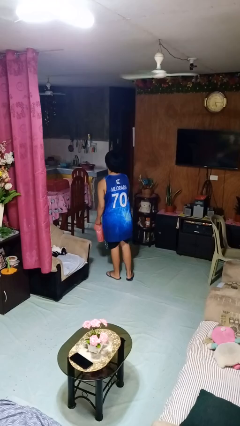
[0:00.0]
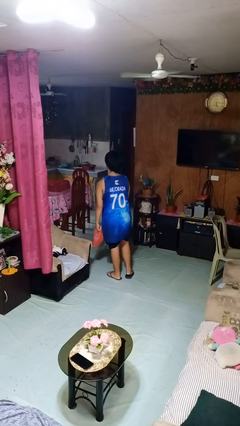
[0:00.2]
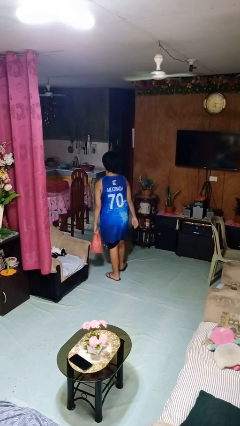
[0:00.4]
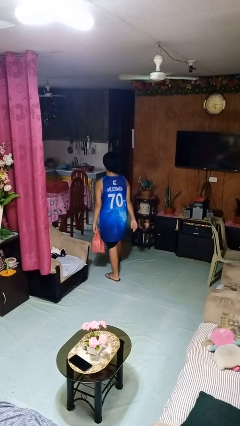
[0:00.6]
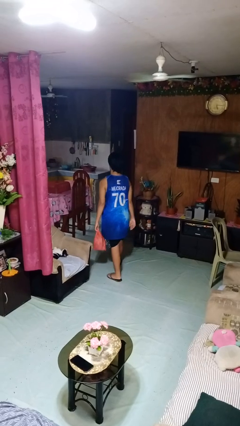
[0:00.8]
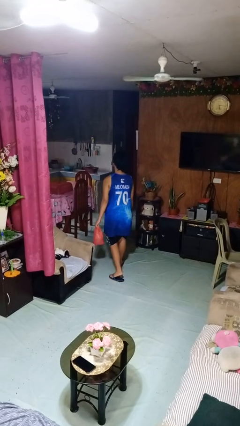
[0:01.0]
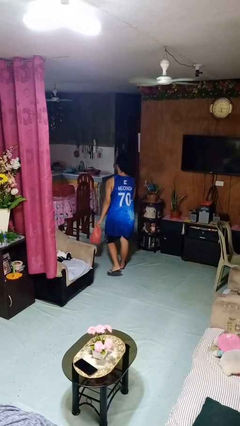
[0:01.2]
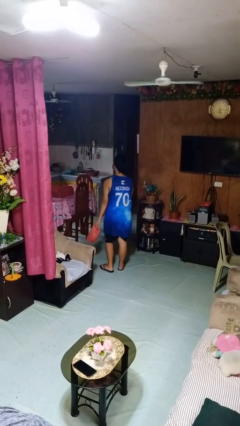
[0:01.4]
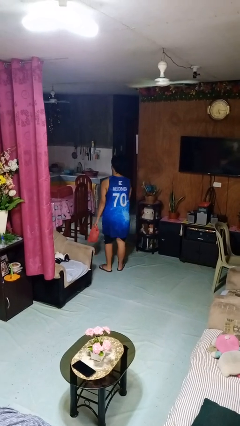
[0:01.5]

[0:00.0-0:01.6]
person carries groceries

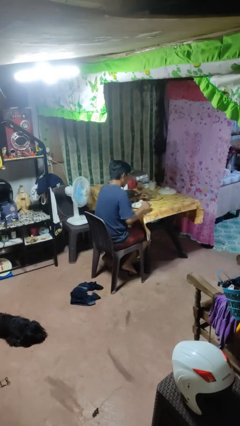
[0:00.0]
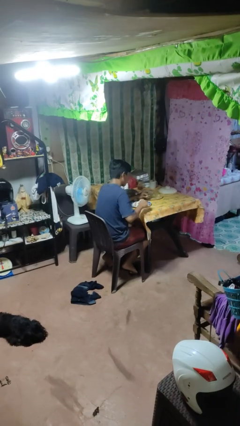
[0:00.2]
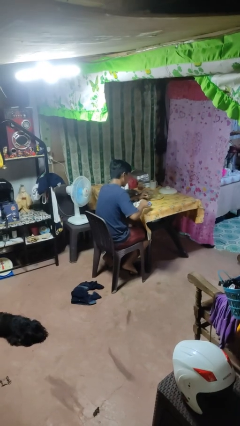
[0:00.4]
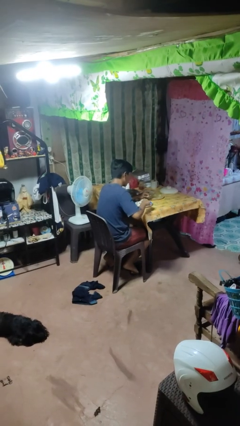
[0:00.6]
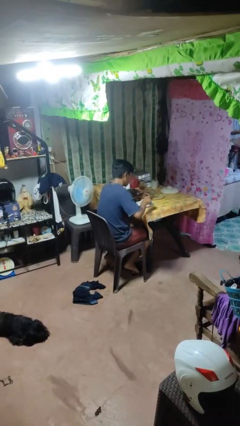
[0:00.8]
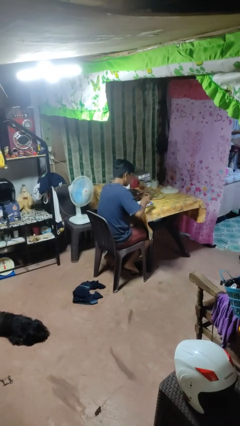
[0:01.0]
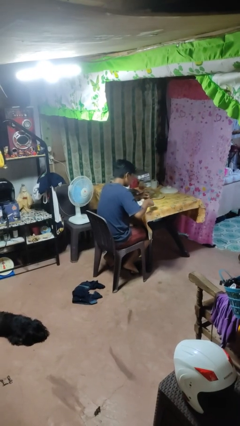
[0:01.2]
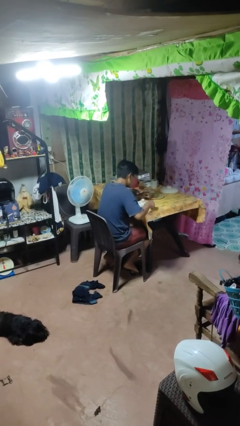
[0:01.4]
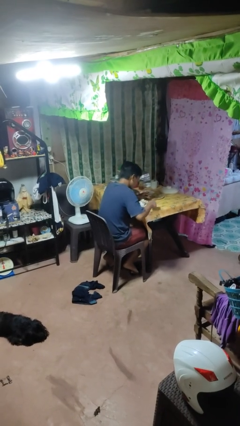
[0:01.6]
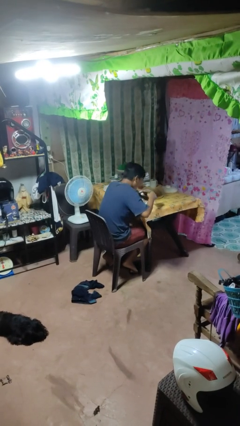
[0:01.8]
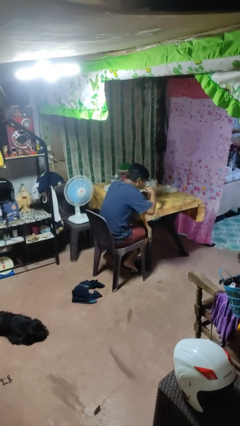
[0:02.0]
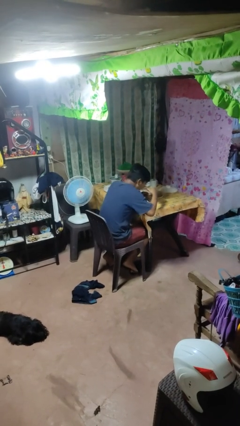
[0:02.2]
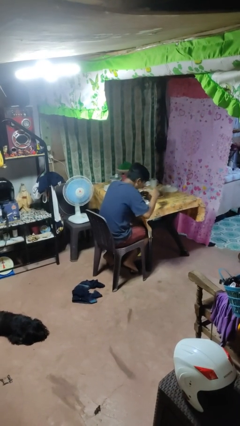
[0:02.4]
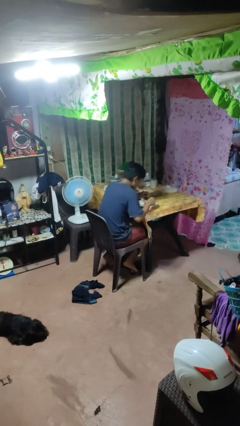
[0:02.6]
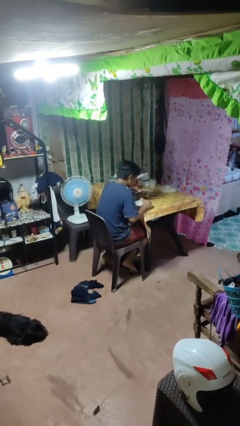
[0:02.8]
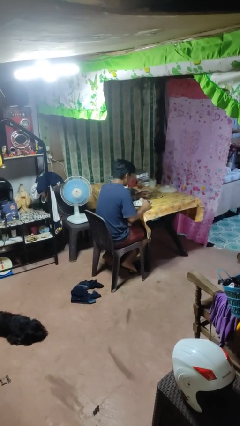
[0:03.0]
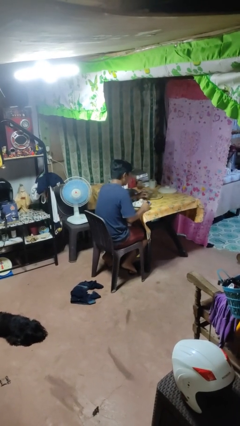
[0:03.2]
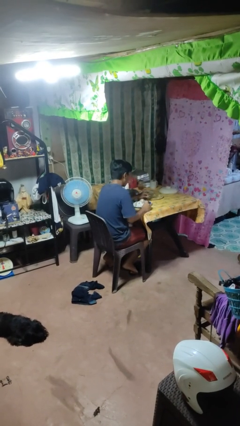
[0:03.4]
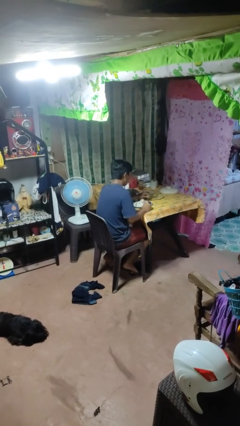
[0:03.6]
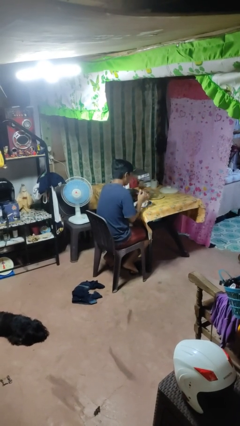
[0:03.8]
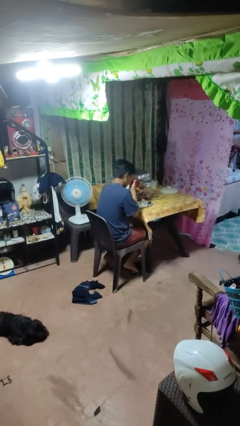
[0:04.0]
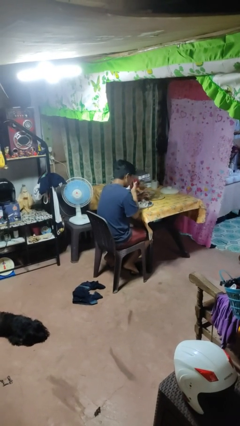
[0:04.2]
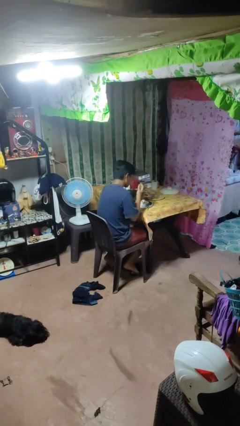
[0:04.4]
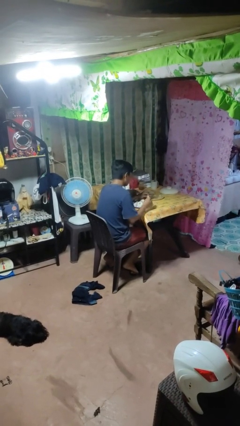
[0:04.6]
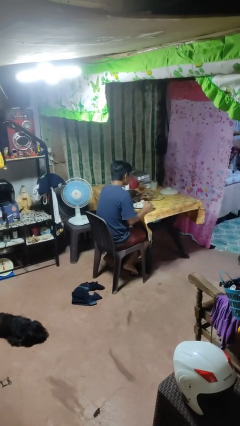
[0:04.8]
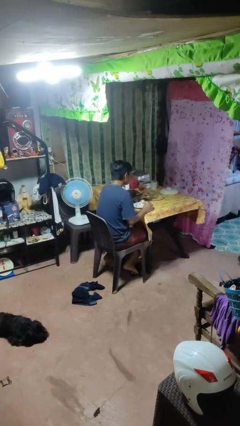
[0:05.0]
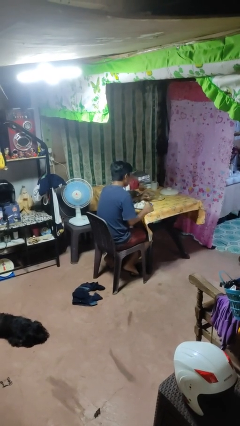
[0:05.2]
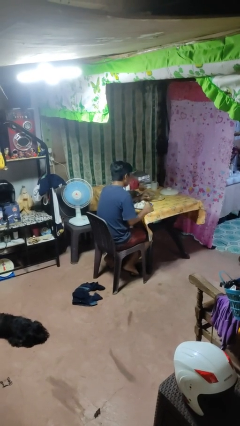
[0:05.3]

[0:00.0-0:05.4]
person eats with utensil

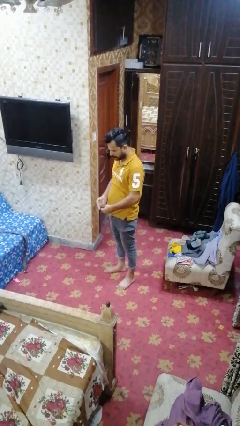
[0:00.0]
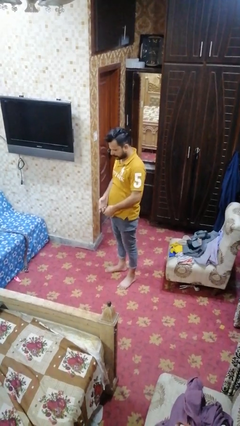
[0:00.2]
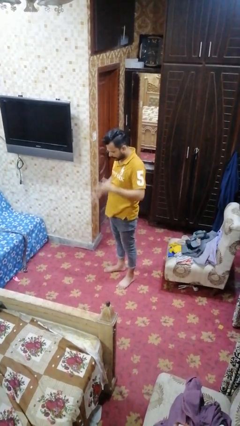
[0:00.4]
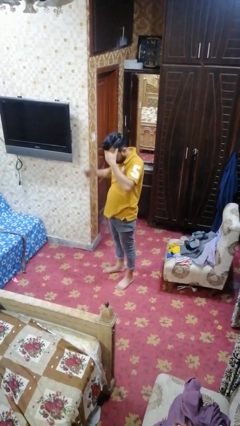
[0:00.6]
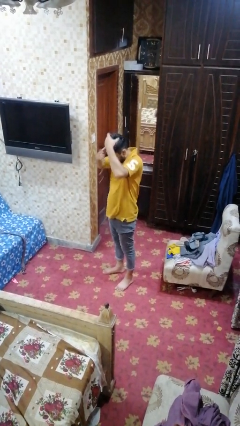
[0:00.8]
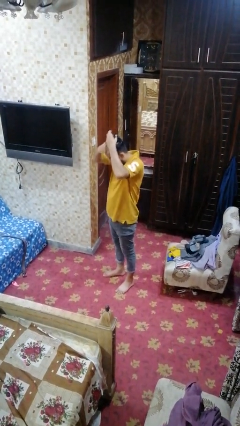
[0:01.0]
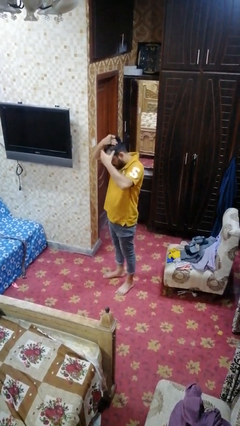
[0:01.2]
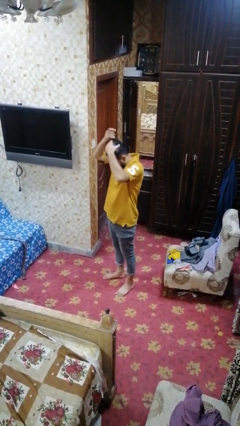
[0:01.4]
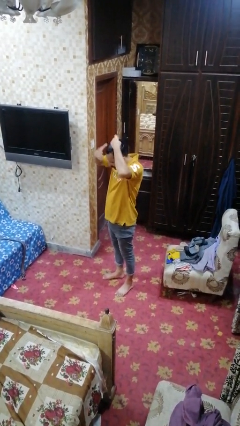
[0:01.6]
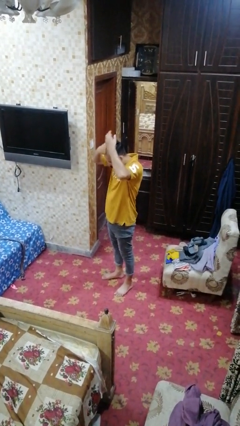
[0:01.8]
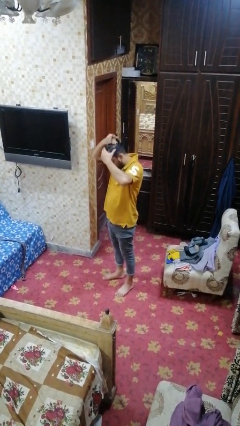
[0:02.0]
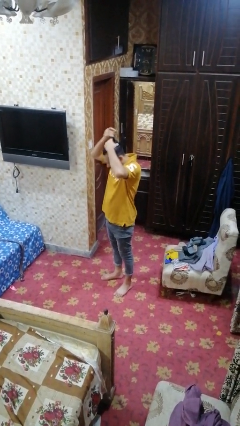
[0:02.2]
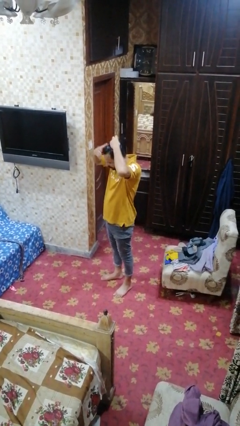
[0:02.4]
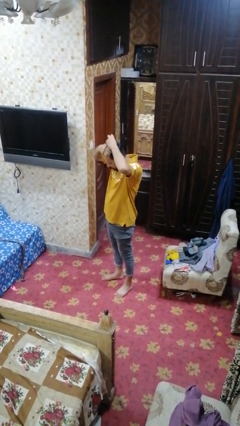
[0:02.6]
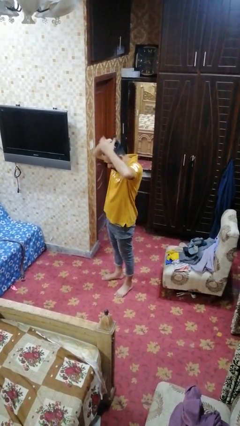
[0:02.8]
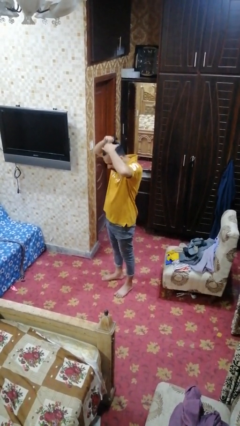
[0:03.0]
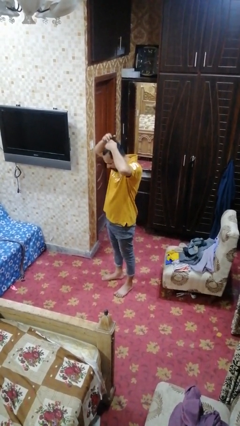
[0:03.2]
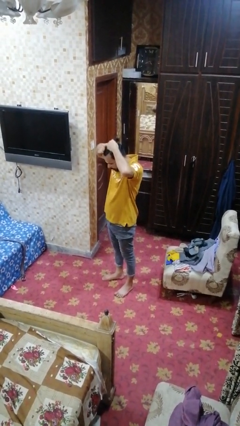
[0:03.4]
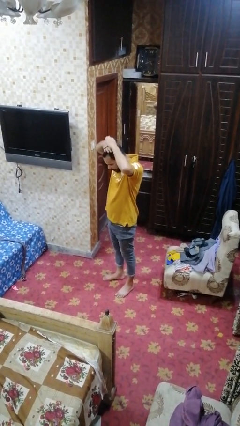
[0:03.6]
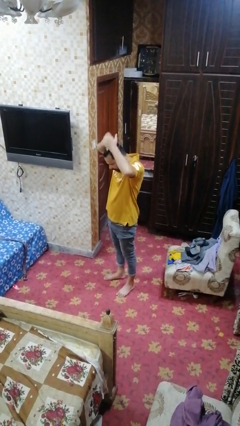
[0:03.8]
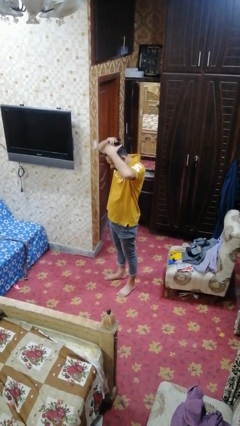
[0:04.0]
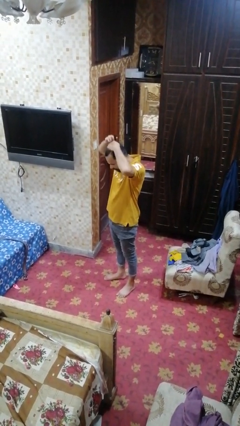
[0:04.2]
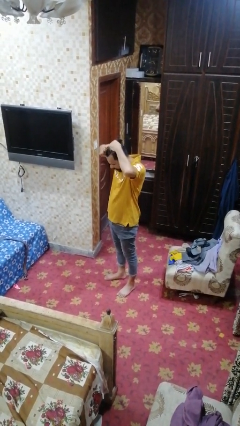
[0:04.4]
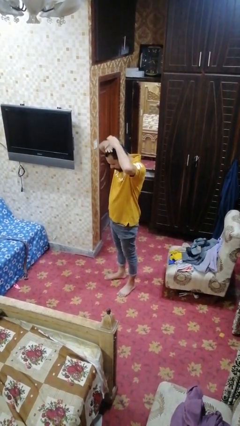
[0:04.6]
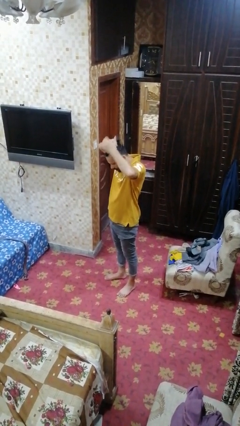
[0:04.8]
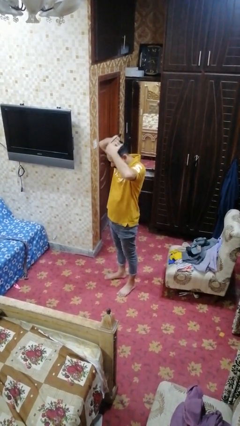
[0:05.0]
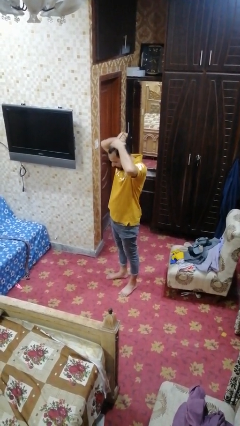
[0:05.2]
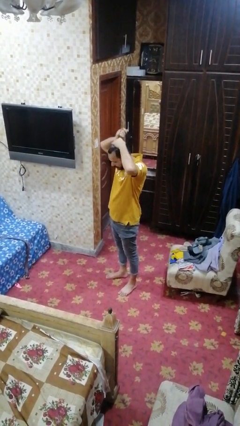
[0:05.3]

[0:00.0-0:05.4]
person puts hair in ponytail

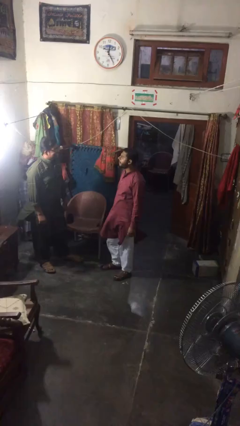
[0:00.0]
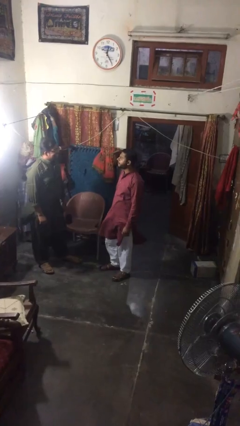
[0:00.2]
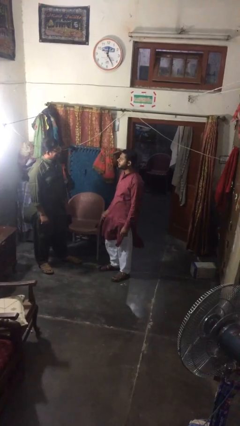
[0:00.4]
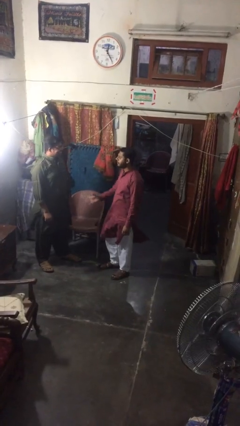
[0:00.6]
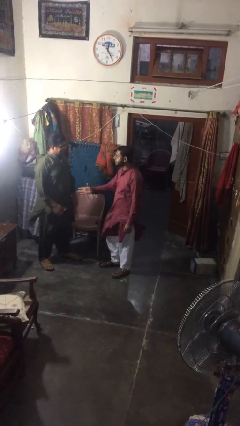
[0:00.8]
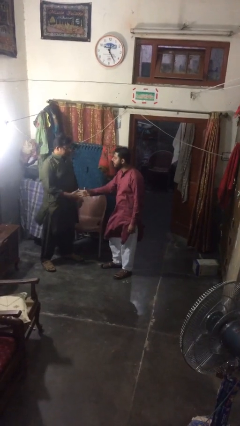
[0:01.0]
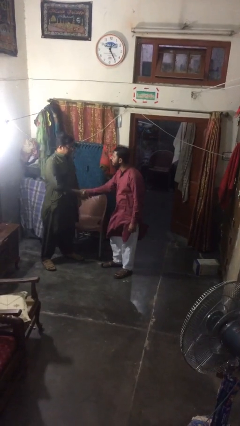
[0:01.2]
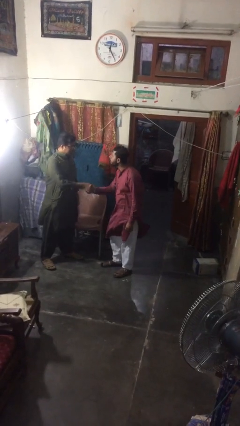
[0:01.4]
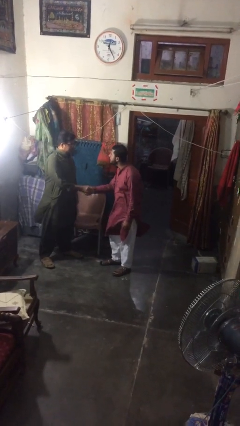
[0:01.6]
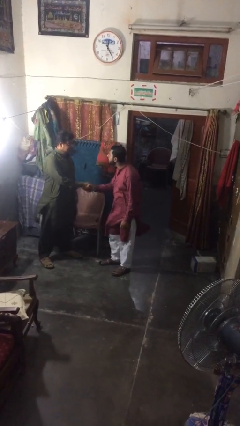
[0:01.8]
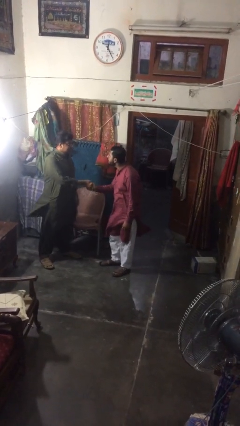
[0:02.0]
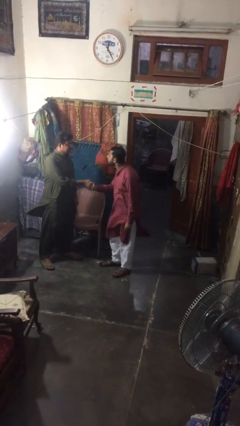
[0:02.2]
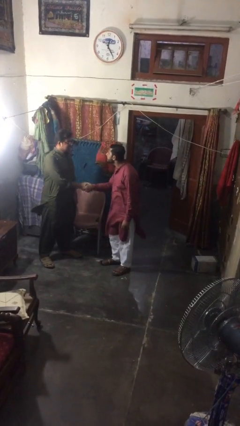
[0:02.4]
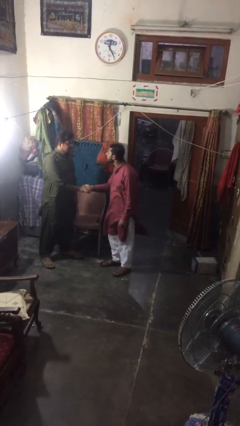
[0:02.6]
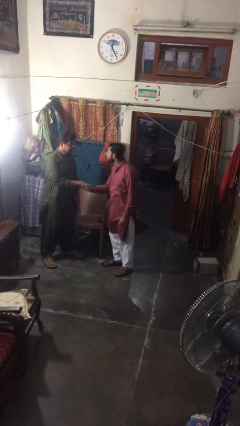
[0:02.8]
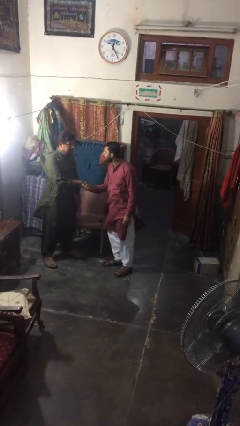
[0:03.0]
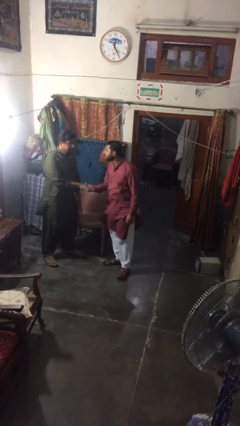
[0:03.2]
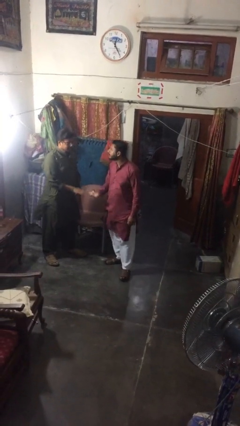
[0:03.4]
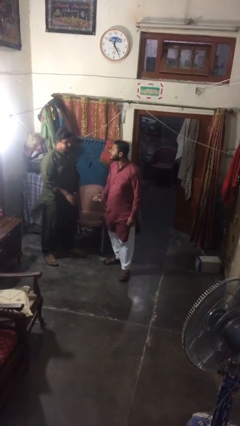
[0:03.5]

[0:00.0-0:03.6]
person shakes hand

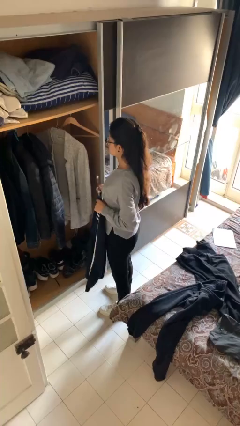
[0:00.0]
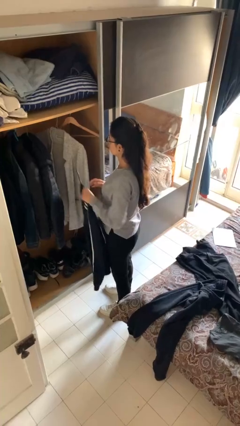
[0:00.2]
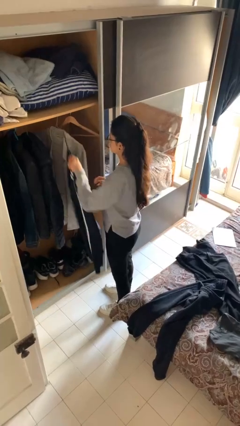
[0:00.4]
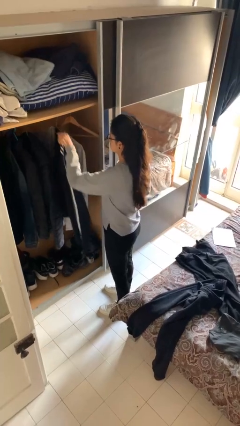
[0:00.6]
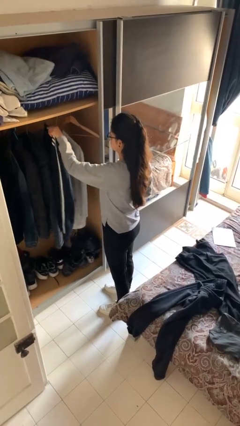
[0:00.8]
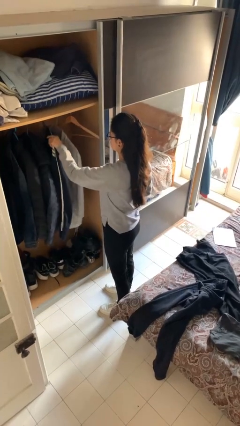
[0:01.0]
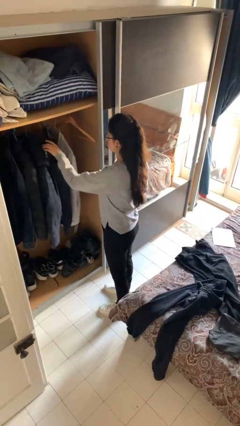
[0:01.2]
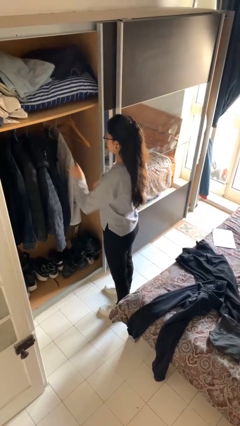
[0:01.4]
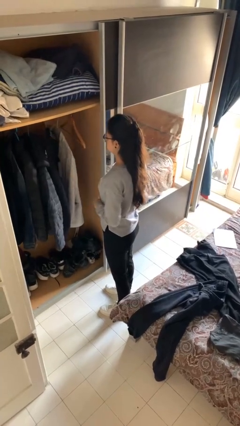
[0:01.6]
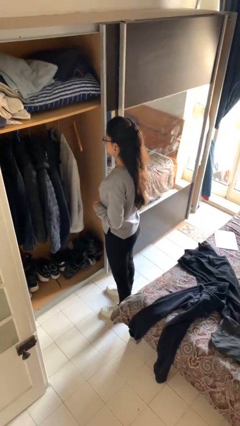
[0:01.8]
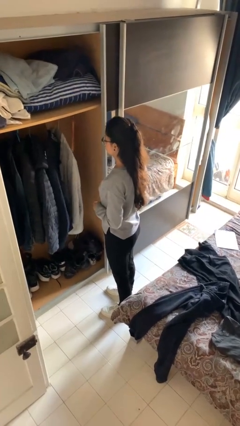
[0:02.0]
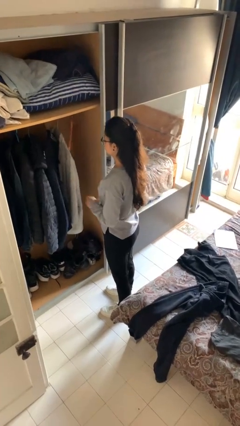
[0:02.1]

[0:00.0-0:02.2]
person puts clothes into closet
